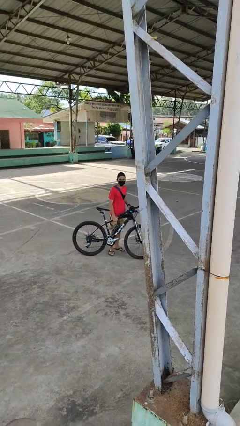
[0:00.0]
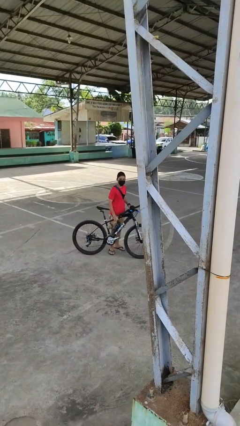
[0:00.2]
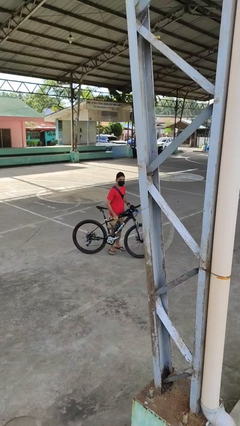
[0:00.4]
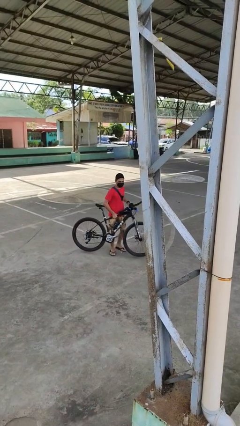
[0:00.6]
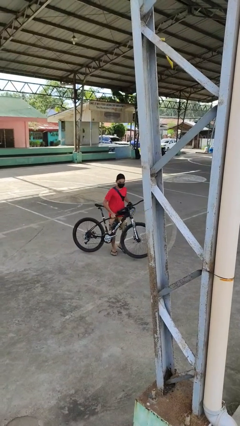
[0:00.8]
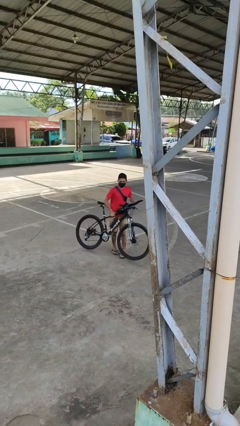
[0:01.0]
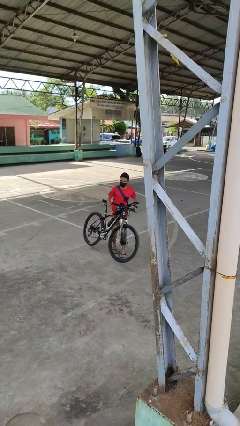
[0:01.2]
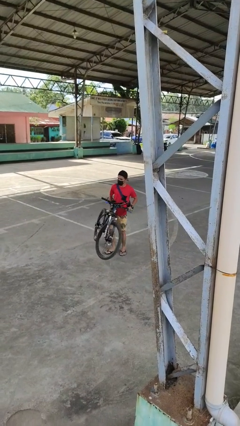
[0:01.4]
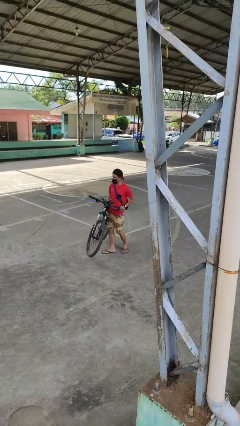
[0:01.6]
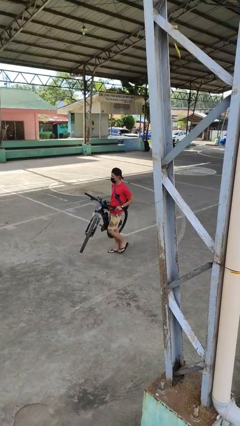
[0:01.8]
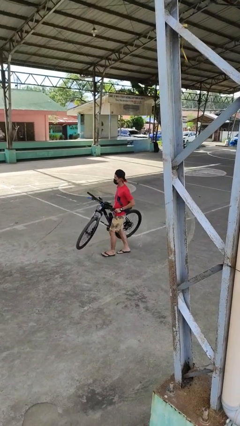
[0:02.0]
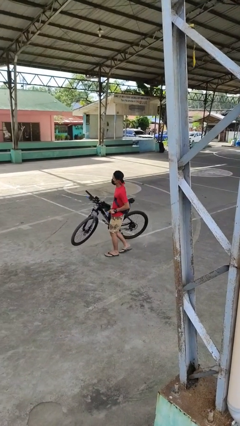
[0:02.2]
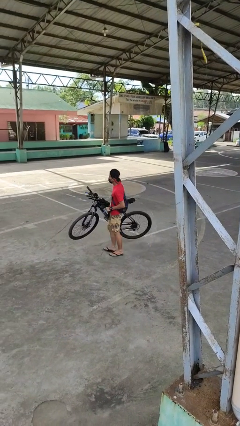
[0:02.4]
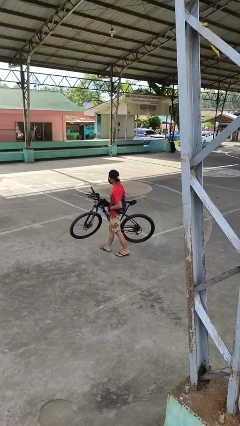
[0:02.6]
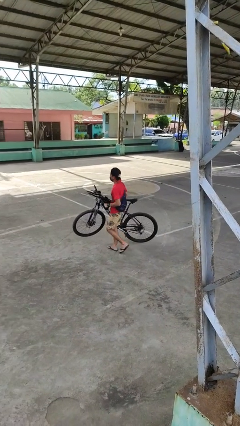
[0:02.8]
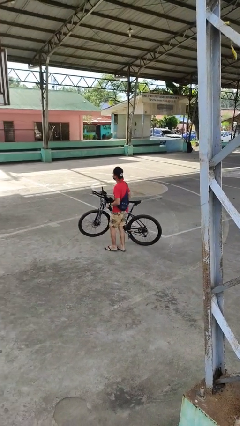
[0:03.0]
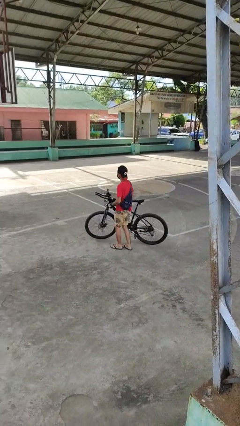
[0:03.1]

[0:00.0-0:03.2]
person carries bicycle

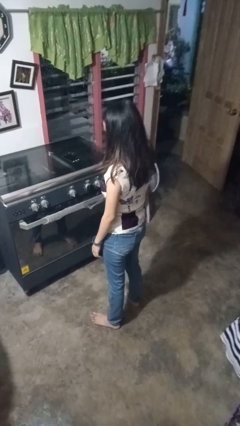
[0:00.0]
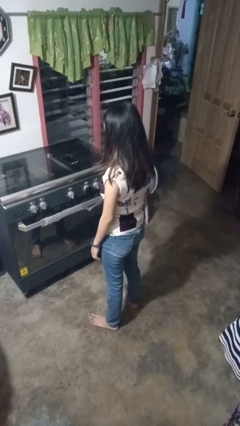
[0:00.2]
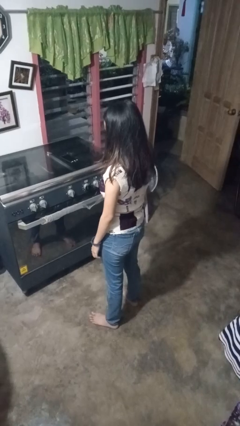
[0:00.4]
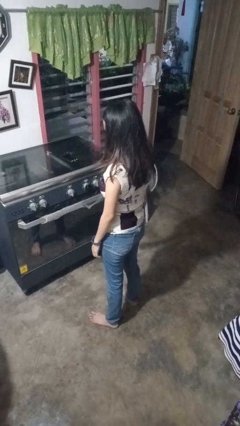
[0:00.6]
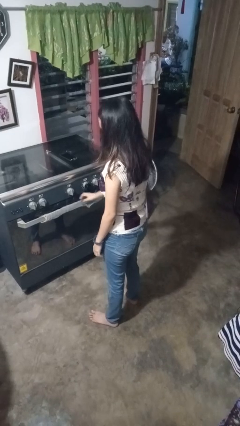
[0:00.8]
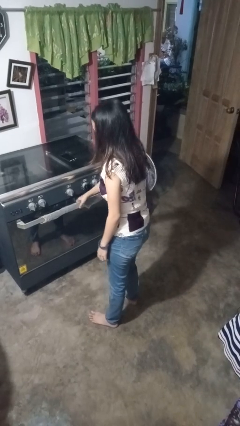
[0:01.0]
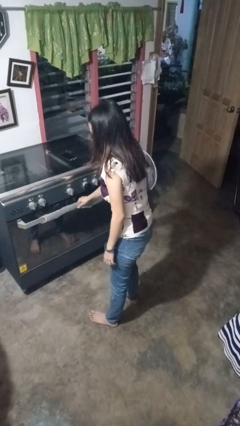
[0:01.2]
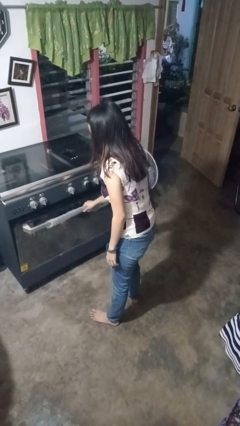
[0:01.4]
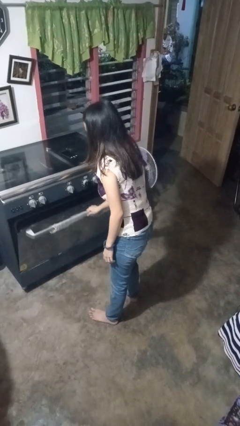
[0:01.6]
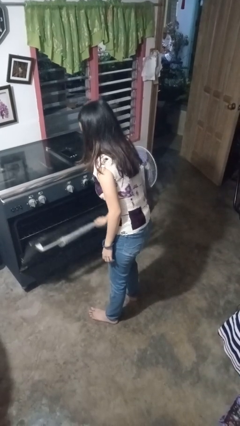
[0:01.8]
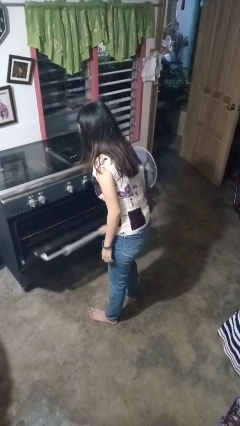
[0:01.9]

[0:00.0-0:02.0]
person opens oven door

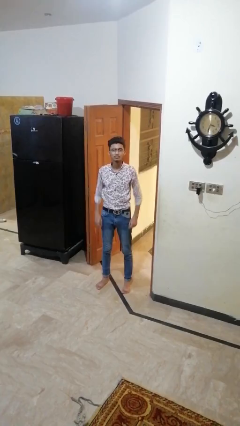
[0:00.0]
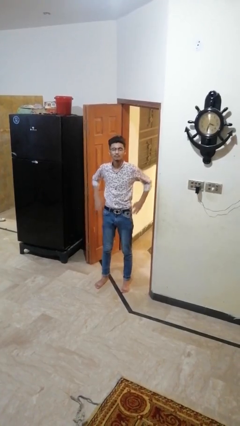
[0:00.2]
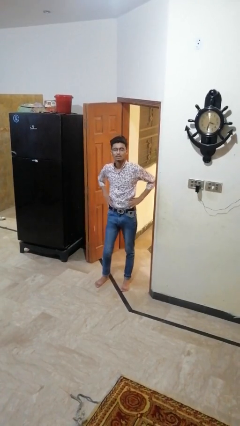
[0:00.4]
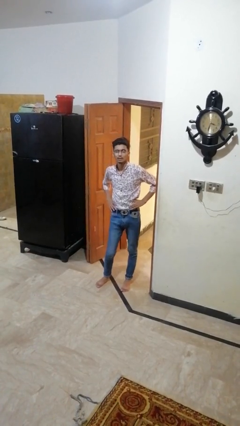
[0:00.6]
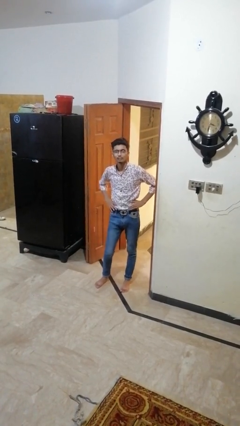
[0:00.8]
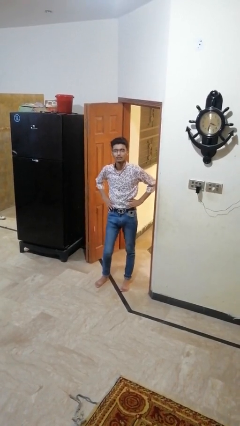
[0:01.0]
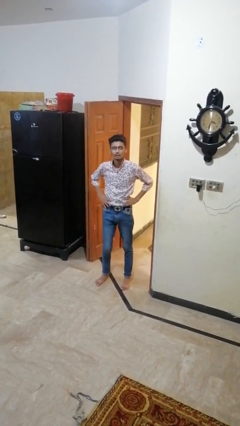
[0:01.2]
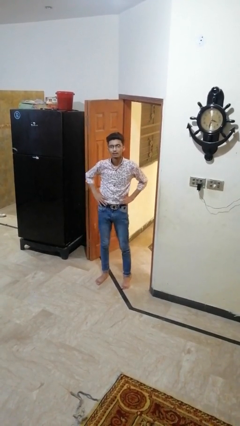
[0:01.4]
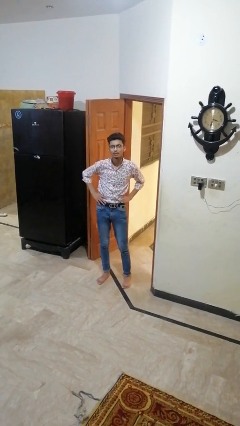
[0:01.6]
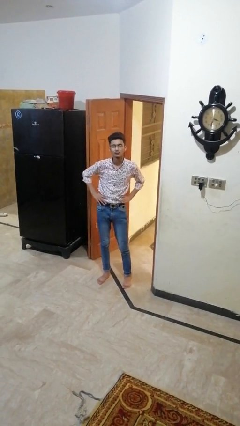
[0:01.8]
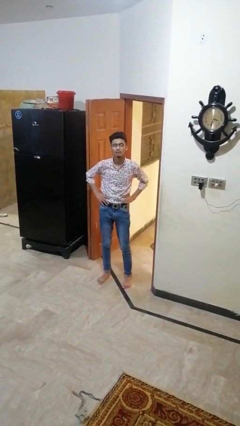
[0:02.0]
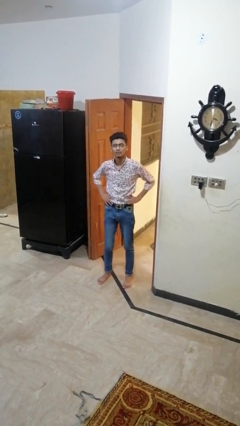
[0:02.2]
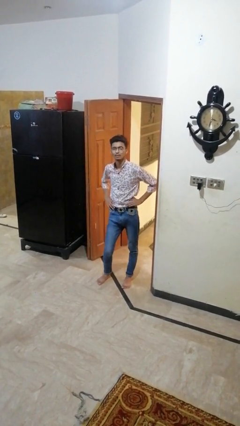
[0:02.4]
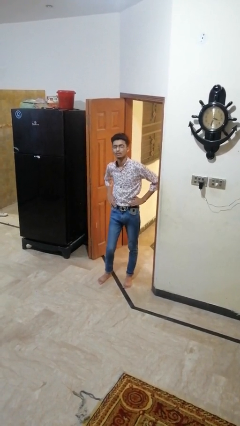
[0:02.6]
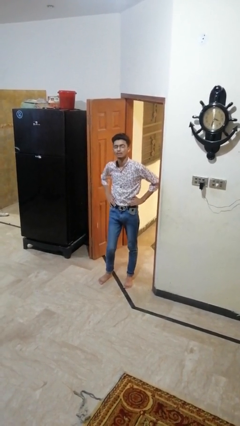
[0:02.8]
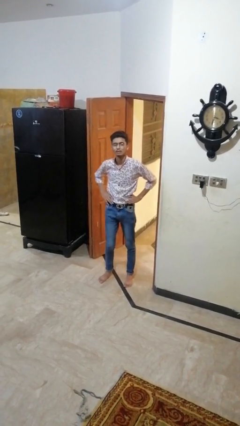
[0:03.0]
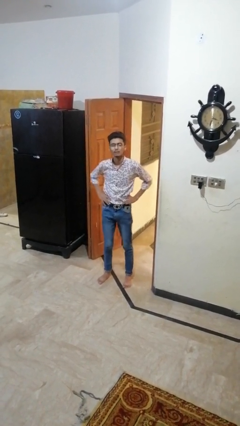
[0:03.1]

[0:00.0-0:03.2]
person wiggles hips

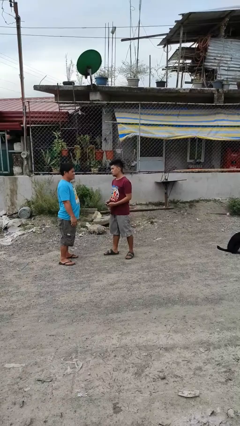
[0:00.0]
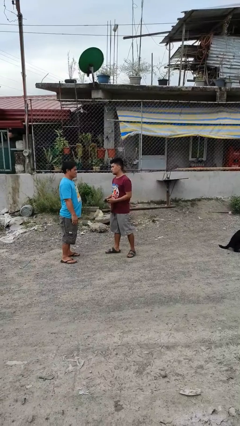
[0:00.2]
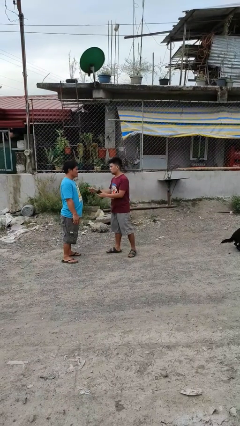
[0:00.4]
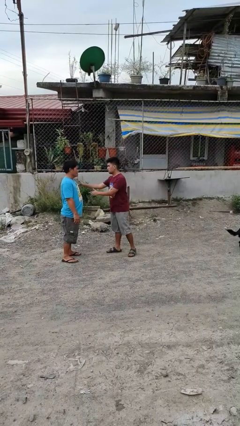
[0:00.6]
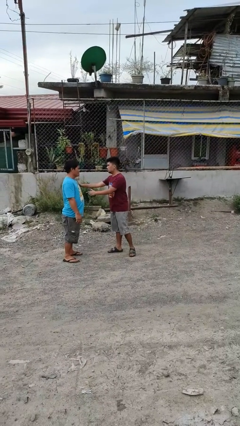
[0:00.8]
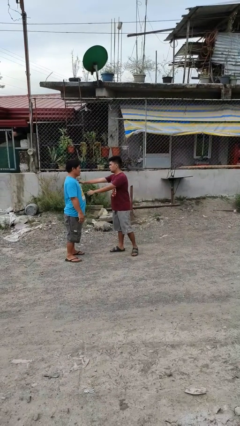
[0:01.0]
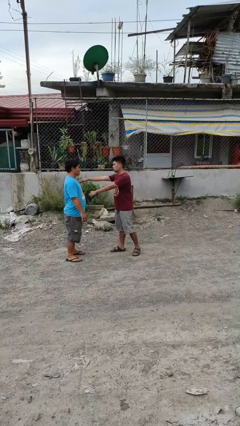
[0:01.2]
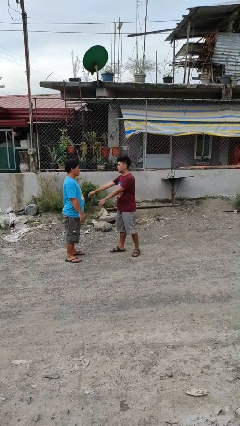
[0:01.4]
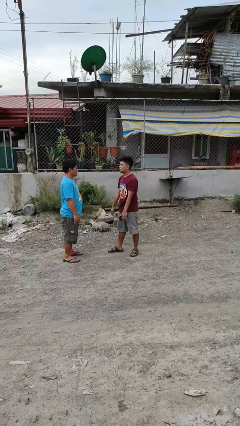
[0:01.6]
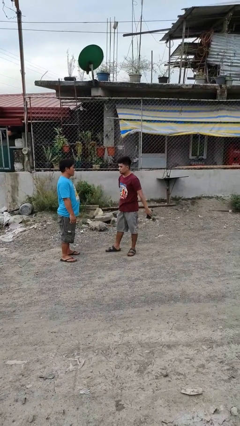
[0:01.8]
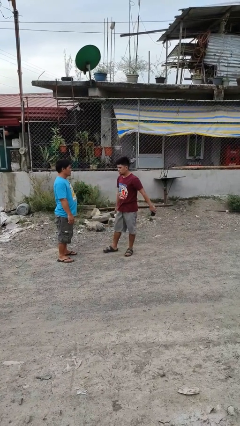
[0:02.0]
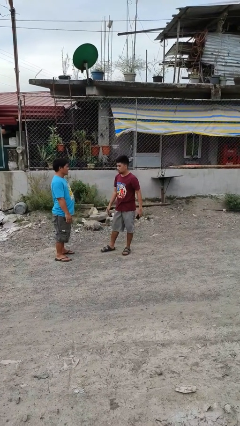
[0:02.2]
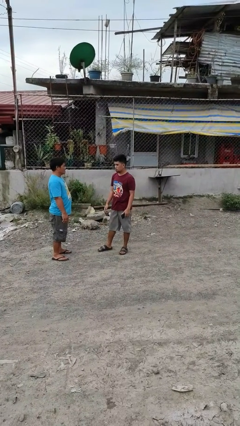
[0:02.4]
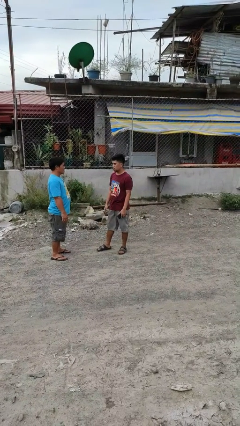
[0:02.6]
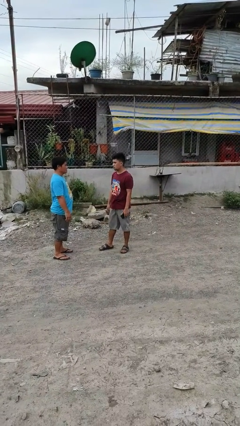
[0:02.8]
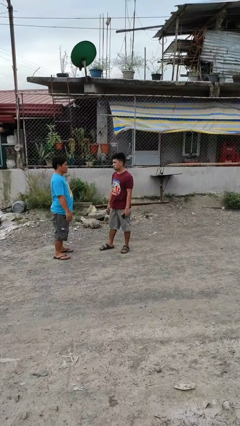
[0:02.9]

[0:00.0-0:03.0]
person shoves person

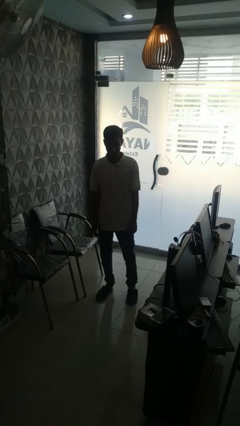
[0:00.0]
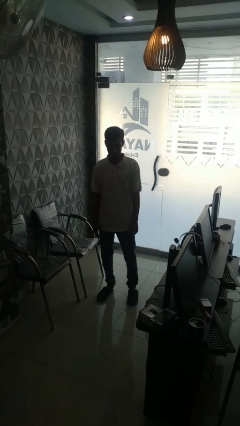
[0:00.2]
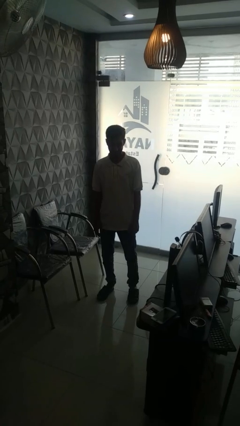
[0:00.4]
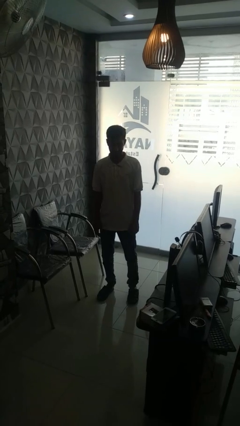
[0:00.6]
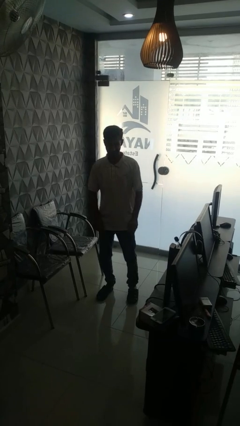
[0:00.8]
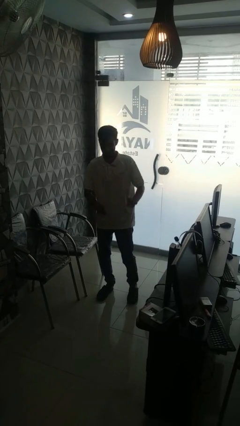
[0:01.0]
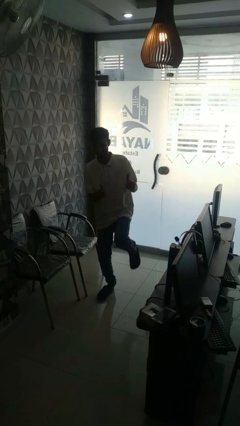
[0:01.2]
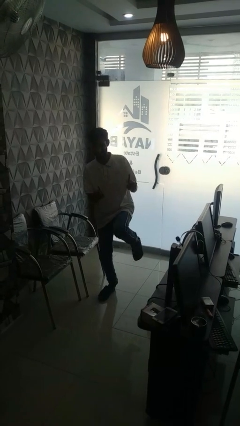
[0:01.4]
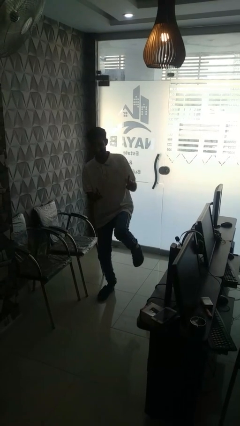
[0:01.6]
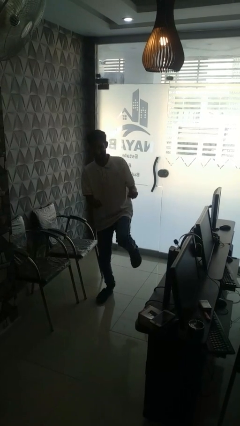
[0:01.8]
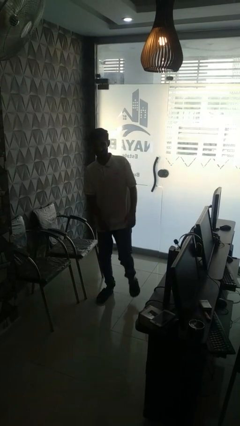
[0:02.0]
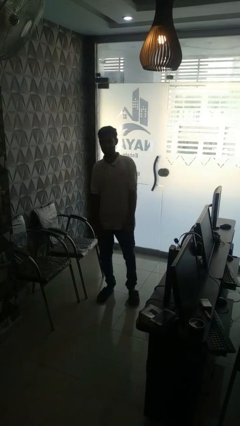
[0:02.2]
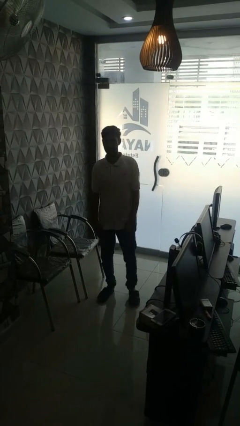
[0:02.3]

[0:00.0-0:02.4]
person dances in place

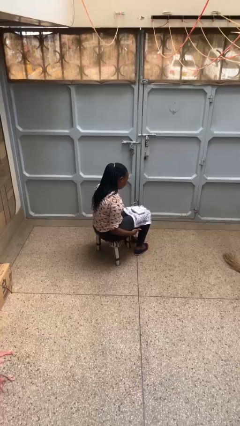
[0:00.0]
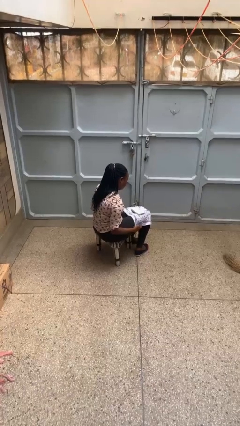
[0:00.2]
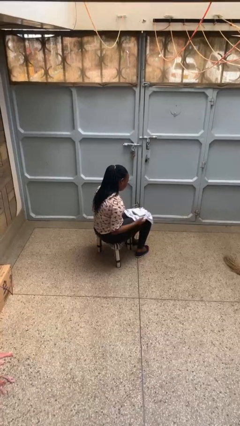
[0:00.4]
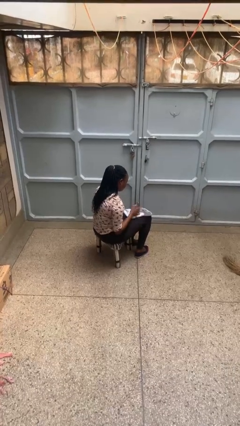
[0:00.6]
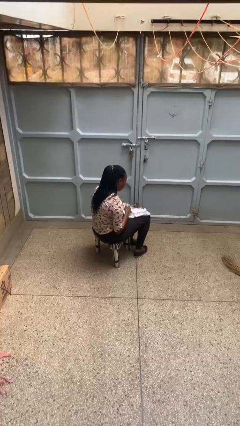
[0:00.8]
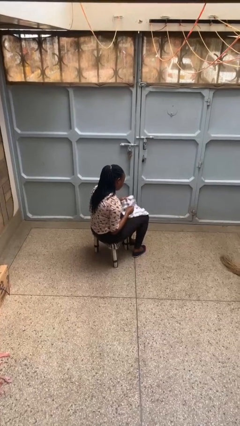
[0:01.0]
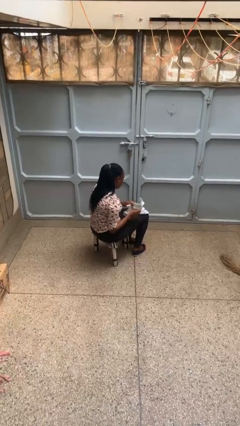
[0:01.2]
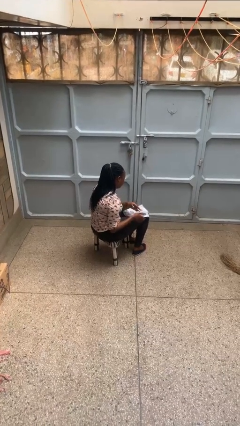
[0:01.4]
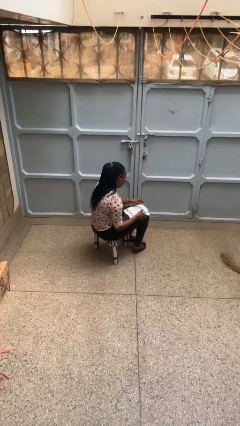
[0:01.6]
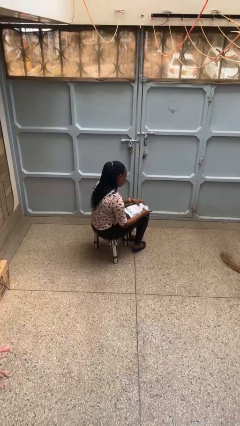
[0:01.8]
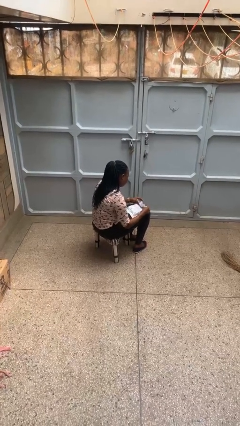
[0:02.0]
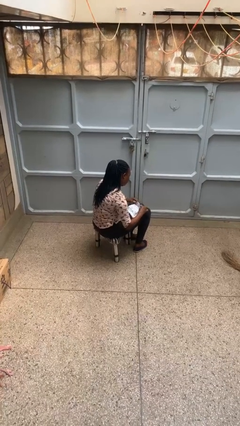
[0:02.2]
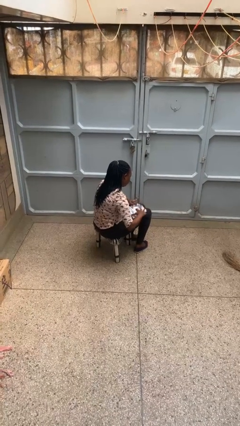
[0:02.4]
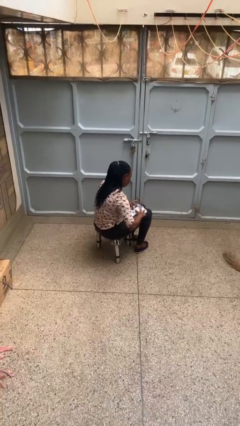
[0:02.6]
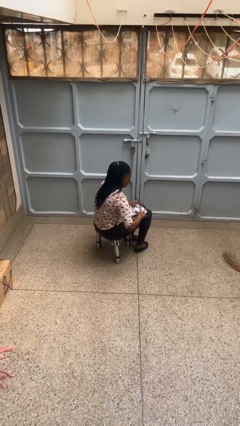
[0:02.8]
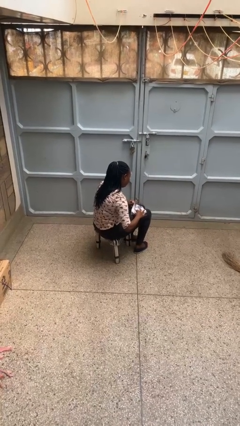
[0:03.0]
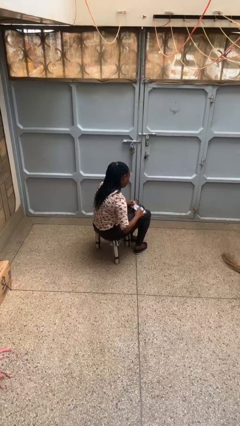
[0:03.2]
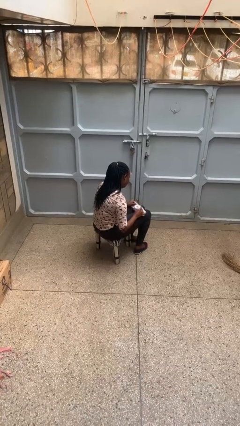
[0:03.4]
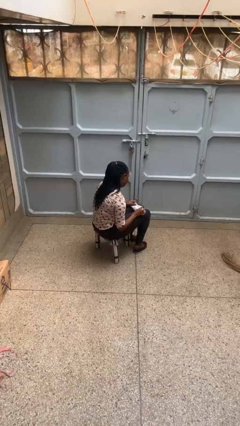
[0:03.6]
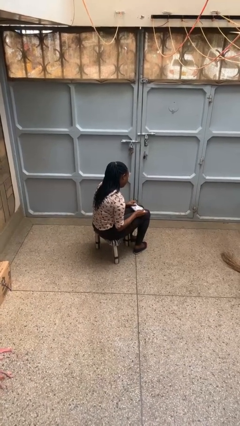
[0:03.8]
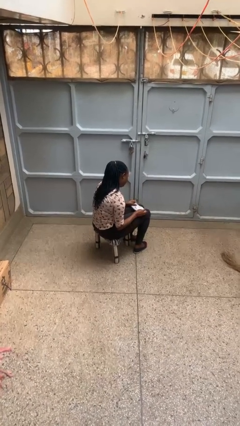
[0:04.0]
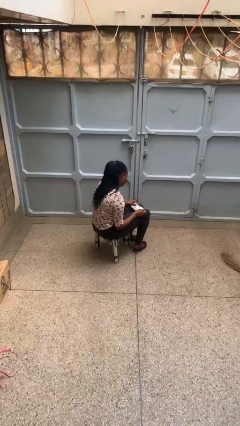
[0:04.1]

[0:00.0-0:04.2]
person wraps box
